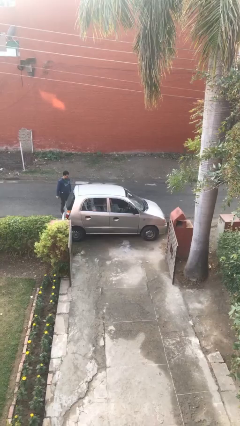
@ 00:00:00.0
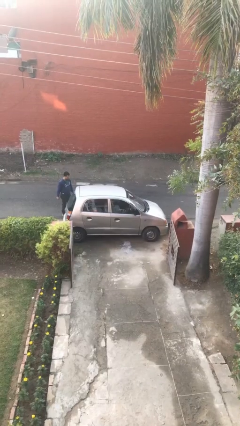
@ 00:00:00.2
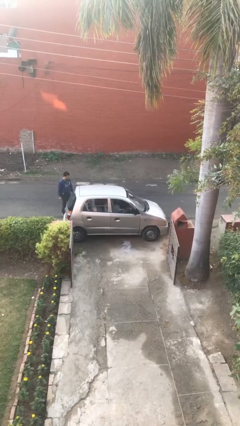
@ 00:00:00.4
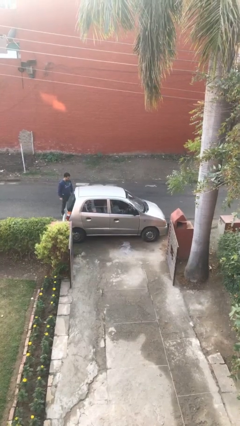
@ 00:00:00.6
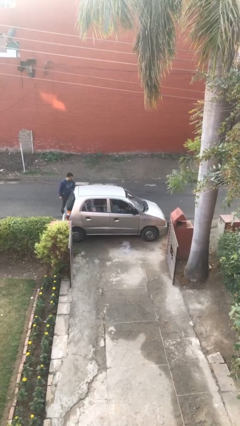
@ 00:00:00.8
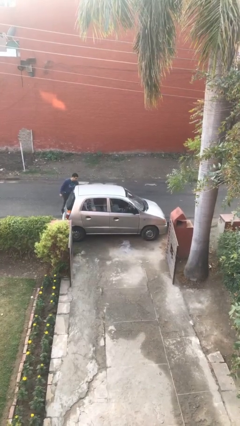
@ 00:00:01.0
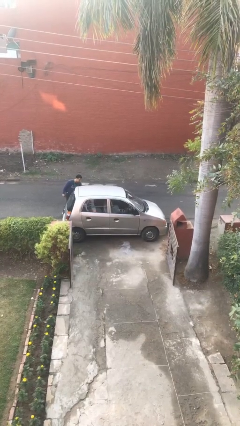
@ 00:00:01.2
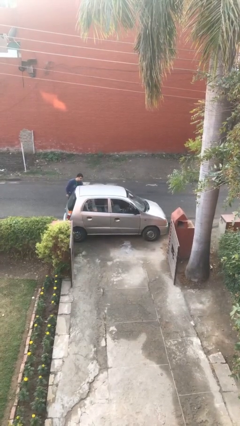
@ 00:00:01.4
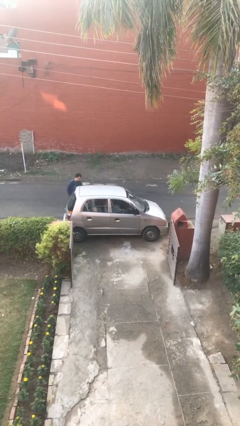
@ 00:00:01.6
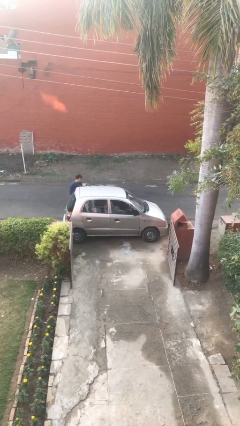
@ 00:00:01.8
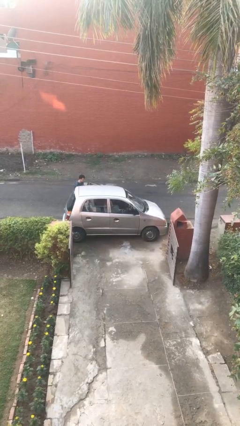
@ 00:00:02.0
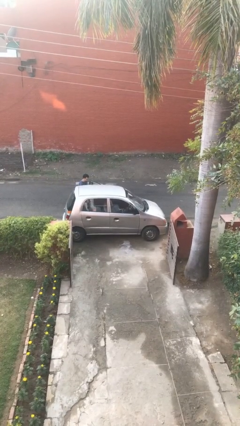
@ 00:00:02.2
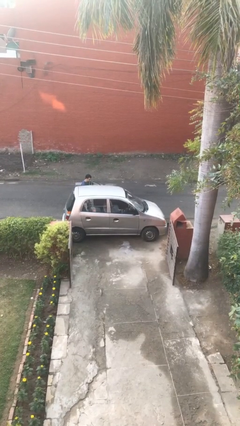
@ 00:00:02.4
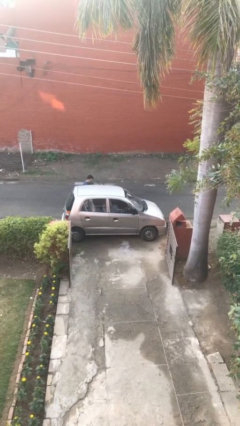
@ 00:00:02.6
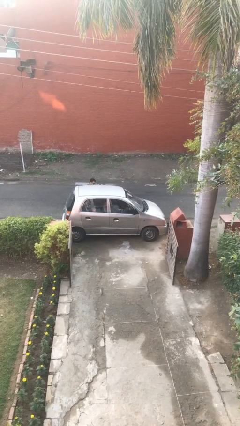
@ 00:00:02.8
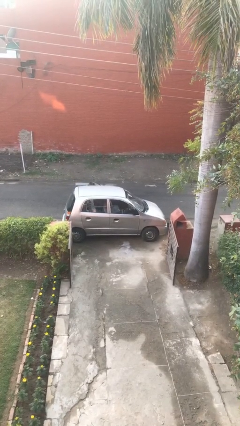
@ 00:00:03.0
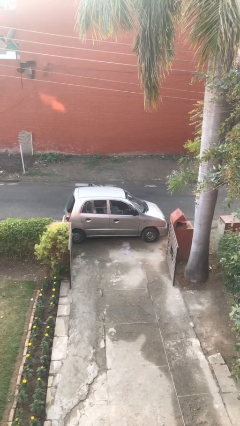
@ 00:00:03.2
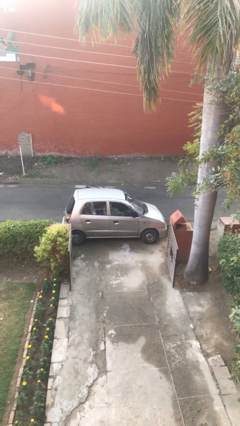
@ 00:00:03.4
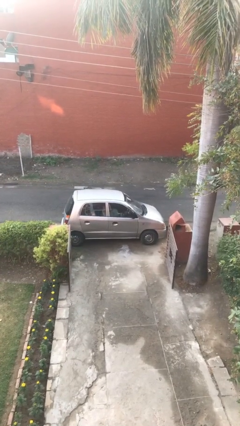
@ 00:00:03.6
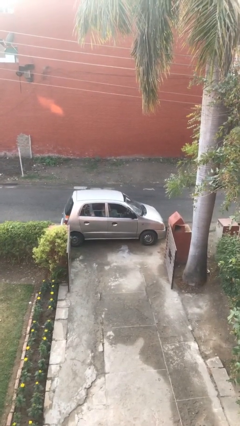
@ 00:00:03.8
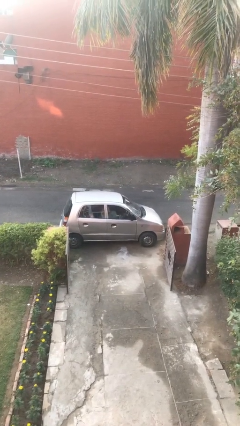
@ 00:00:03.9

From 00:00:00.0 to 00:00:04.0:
car picks up person

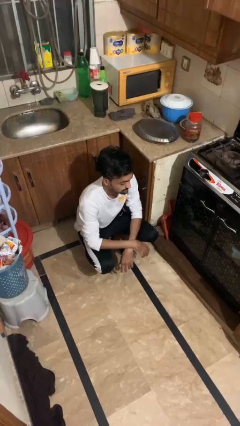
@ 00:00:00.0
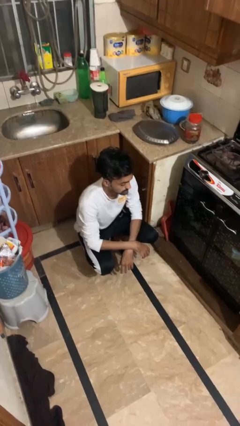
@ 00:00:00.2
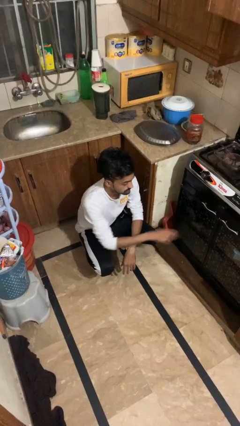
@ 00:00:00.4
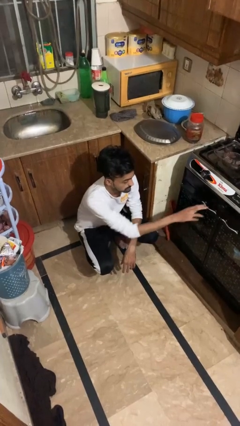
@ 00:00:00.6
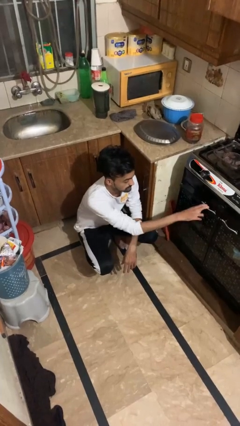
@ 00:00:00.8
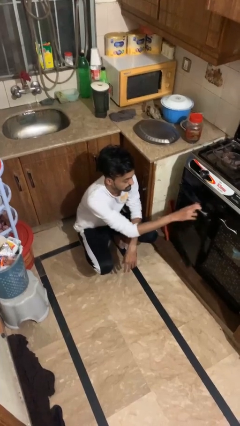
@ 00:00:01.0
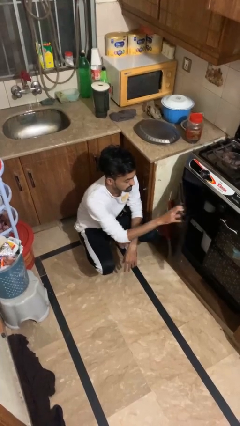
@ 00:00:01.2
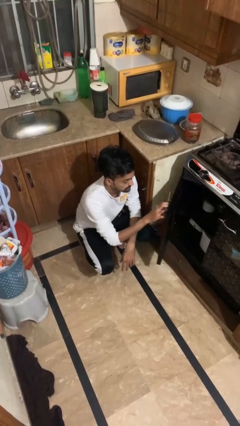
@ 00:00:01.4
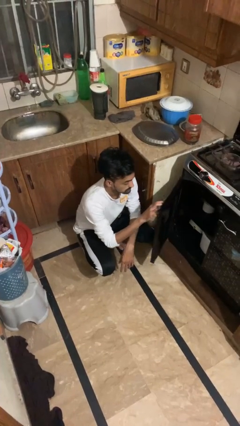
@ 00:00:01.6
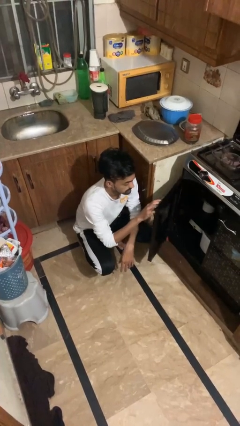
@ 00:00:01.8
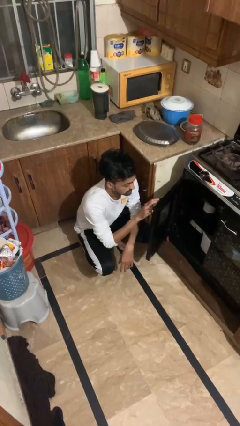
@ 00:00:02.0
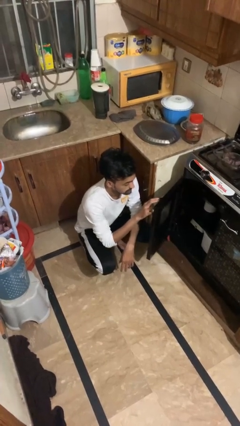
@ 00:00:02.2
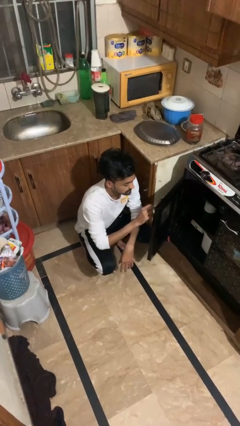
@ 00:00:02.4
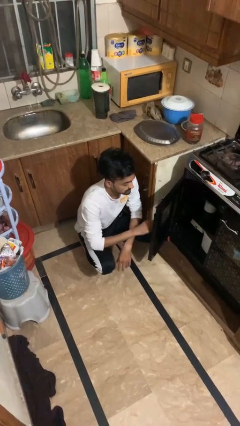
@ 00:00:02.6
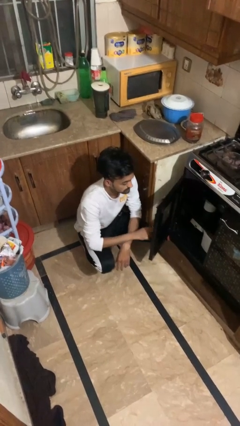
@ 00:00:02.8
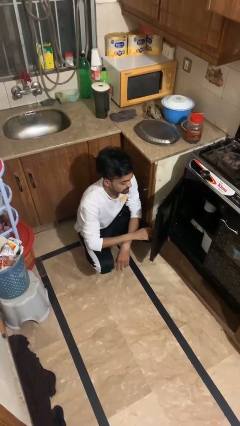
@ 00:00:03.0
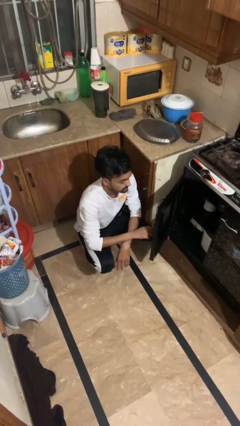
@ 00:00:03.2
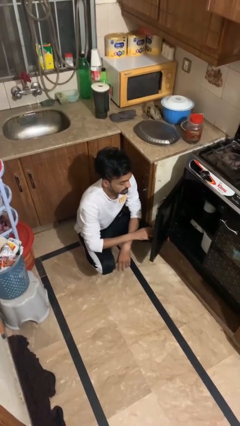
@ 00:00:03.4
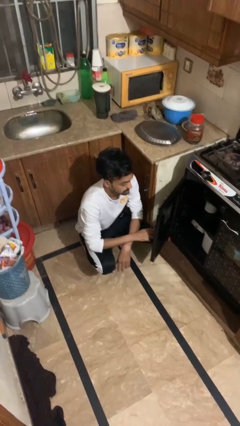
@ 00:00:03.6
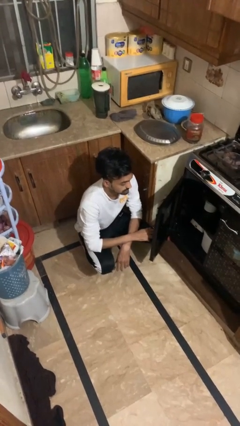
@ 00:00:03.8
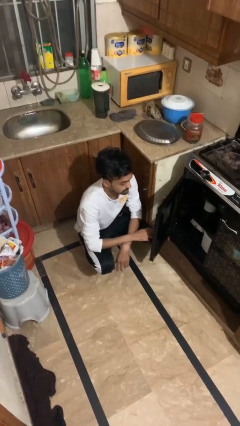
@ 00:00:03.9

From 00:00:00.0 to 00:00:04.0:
person opens oven door

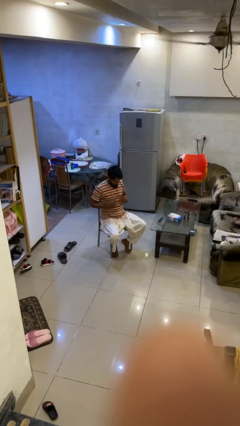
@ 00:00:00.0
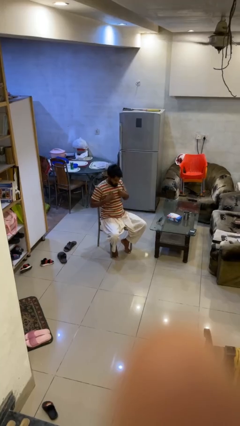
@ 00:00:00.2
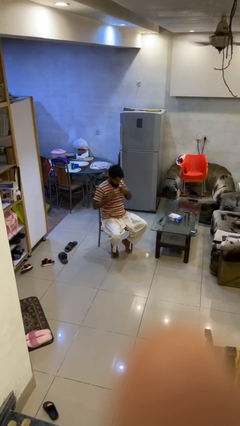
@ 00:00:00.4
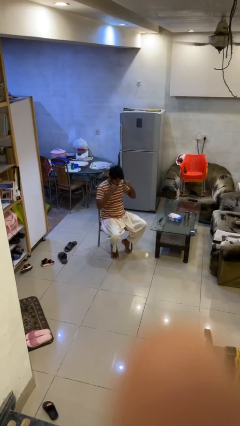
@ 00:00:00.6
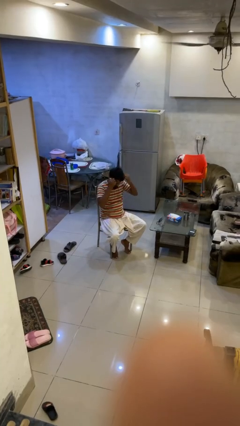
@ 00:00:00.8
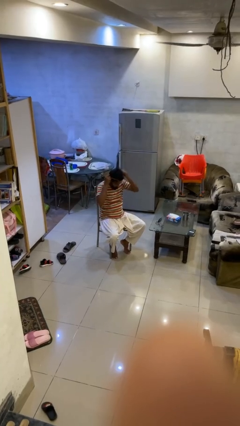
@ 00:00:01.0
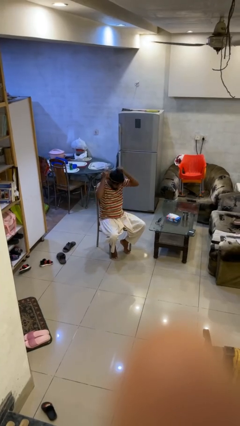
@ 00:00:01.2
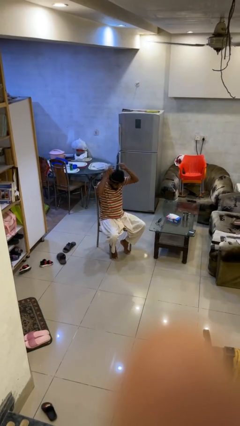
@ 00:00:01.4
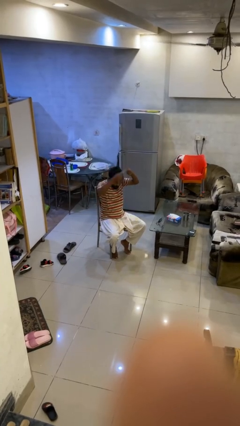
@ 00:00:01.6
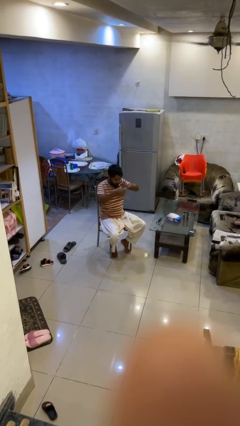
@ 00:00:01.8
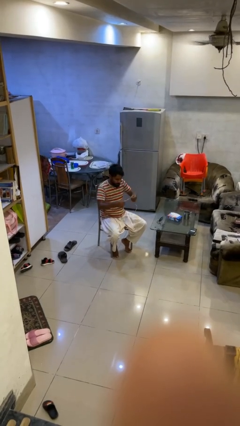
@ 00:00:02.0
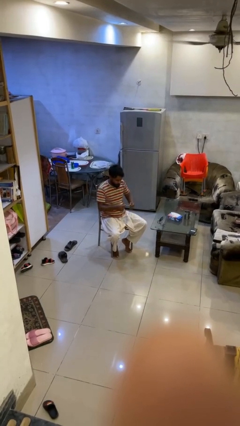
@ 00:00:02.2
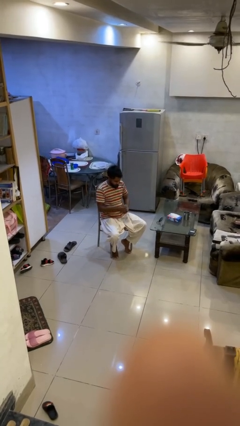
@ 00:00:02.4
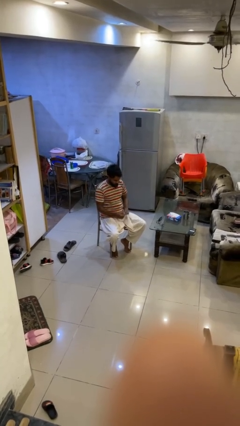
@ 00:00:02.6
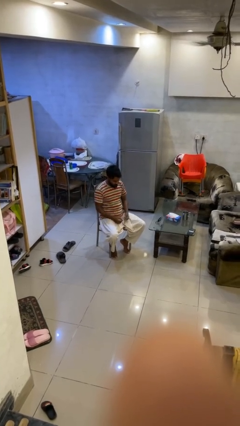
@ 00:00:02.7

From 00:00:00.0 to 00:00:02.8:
person takes off necklace

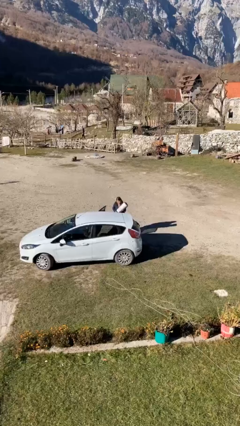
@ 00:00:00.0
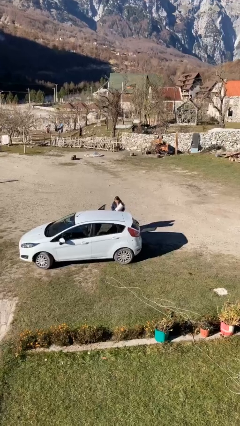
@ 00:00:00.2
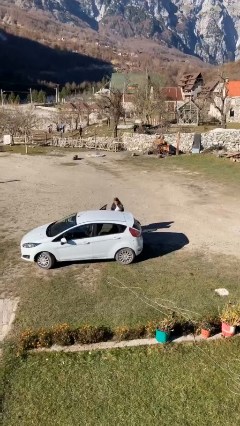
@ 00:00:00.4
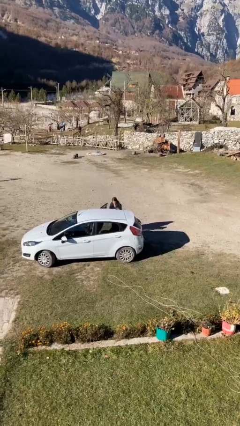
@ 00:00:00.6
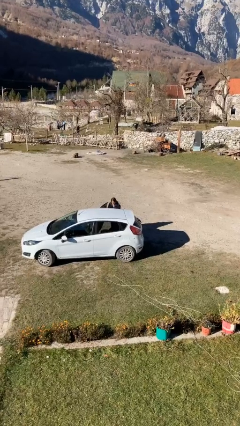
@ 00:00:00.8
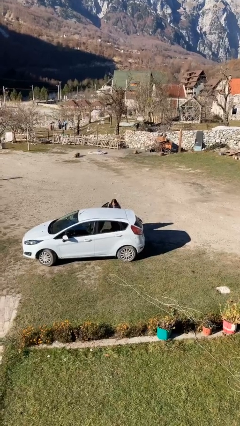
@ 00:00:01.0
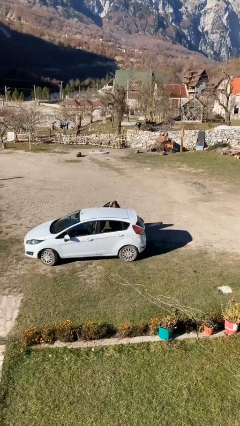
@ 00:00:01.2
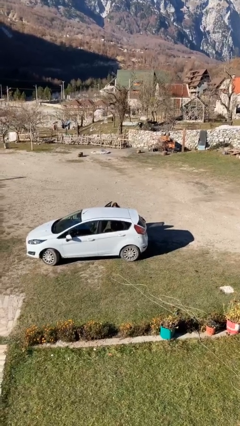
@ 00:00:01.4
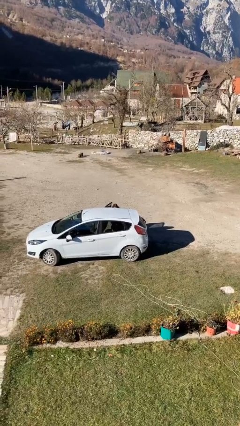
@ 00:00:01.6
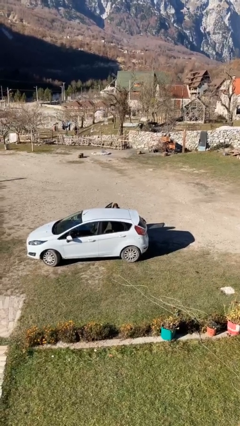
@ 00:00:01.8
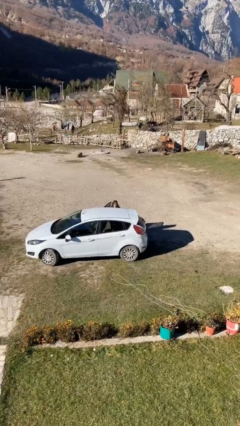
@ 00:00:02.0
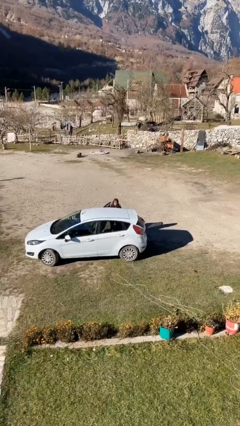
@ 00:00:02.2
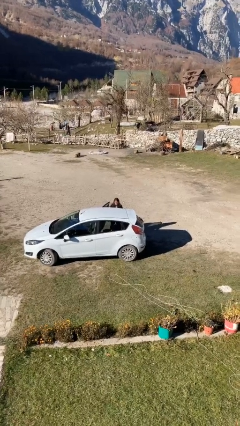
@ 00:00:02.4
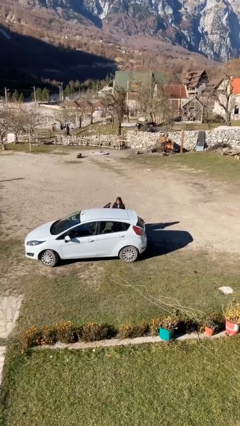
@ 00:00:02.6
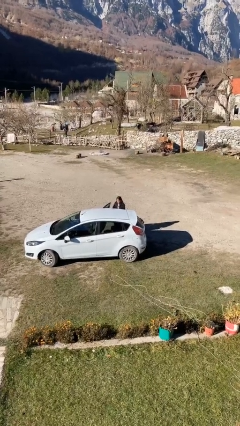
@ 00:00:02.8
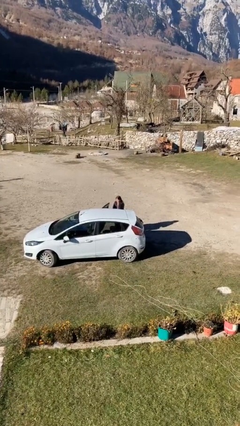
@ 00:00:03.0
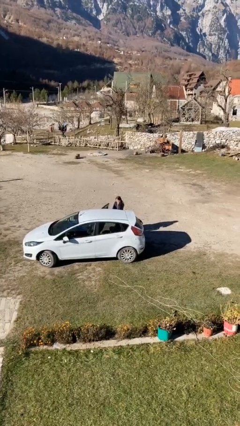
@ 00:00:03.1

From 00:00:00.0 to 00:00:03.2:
person loads car

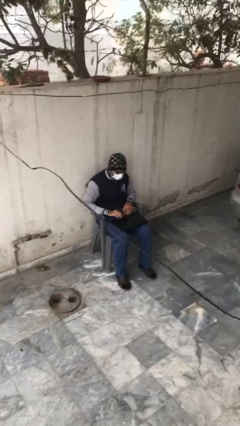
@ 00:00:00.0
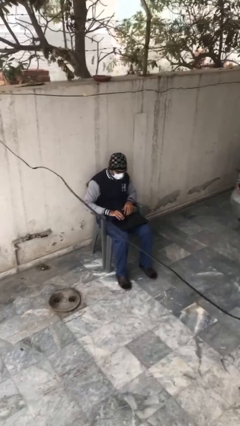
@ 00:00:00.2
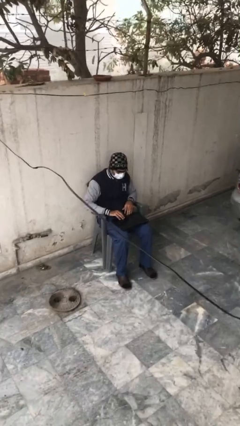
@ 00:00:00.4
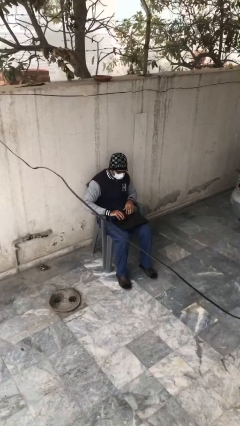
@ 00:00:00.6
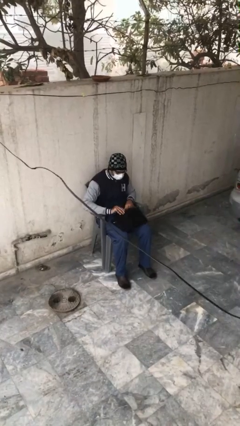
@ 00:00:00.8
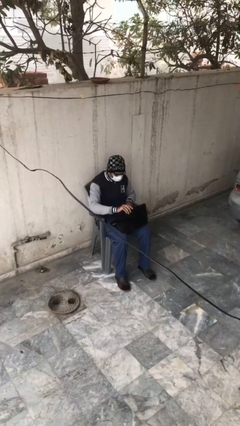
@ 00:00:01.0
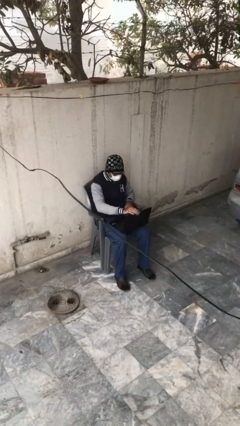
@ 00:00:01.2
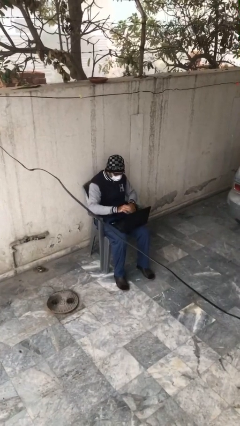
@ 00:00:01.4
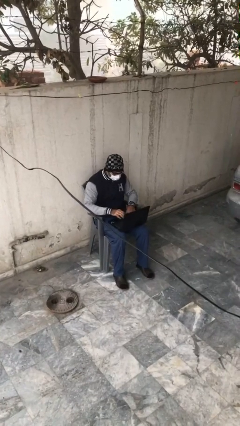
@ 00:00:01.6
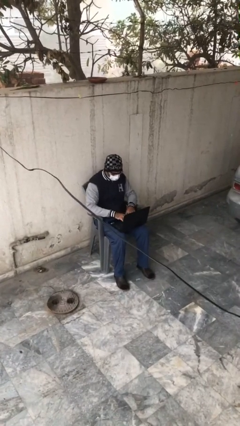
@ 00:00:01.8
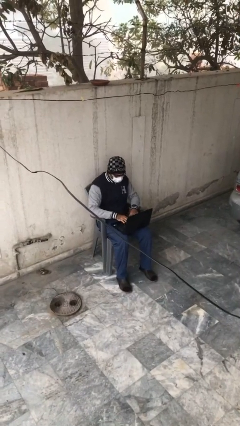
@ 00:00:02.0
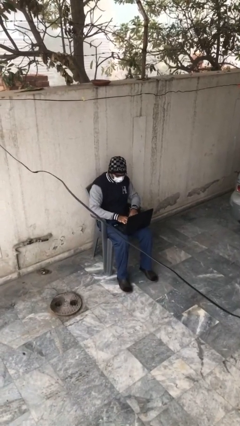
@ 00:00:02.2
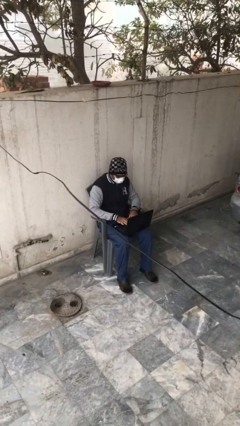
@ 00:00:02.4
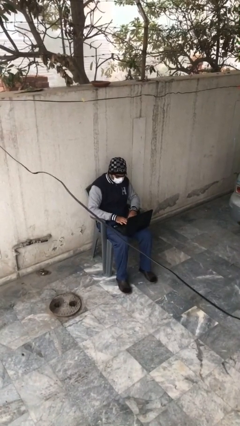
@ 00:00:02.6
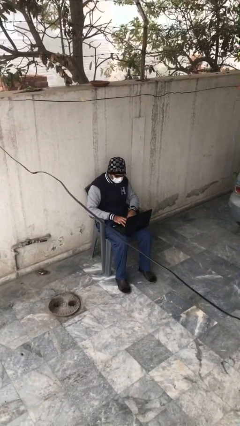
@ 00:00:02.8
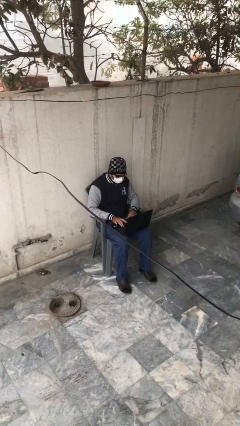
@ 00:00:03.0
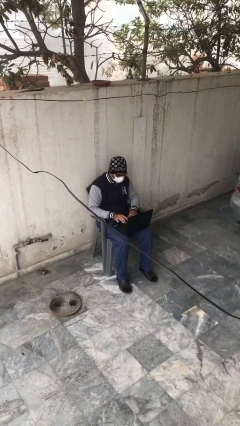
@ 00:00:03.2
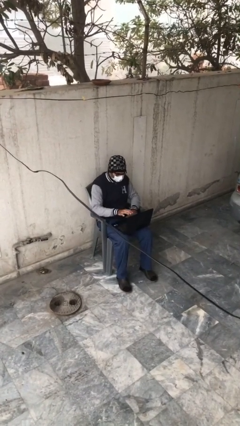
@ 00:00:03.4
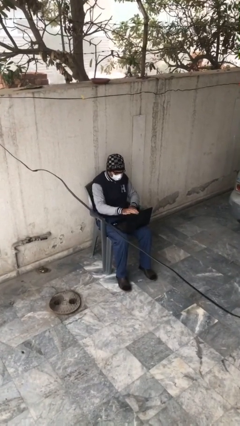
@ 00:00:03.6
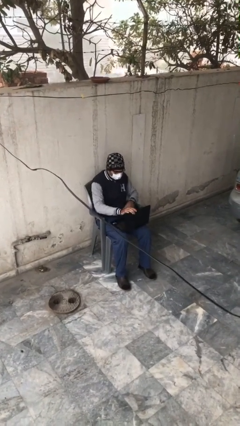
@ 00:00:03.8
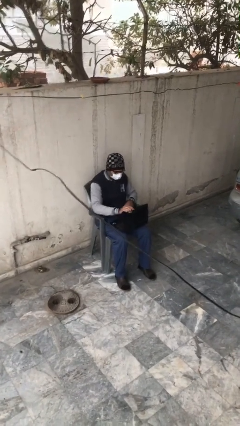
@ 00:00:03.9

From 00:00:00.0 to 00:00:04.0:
person interacts with laptop
